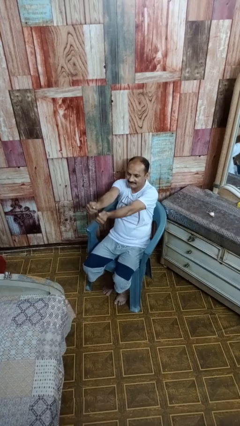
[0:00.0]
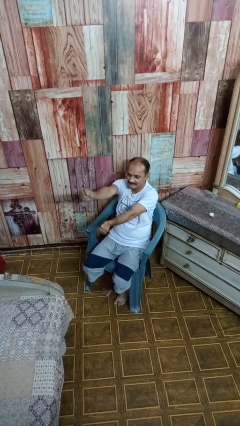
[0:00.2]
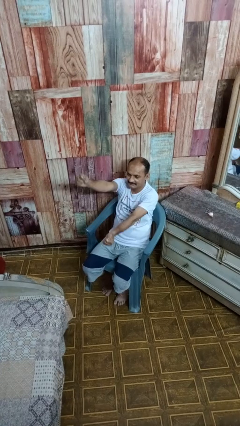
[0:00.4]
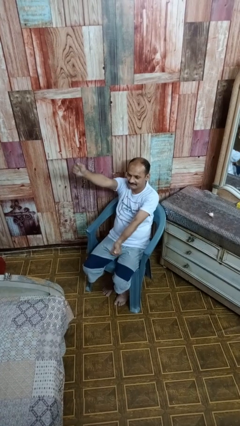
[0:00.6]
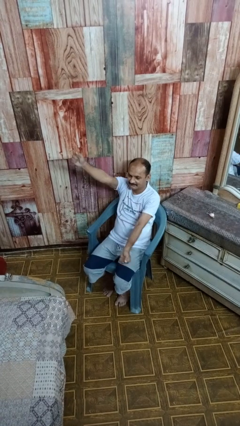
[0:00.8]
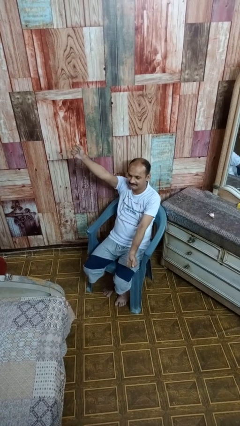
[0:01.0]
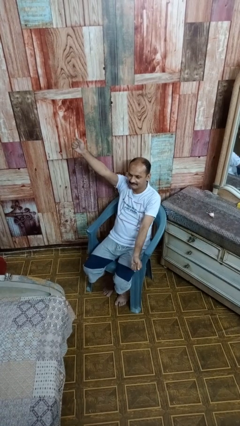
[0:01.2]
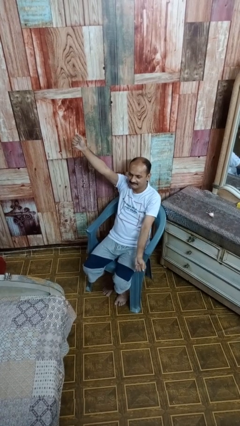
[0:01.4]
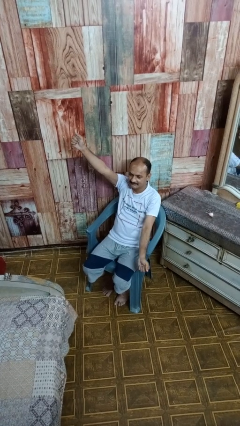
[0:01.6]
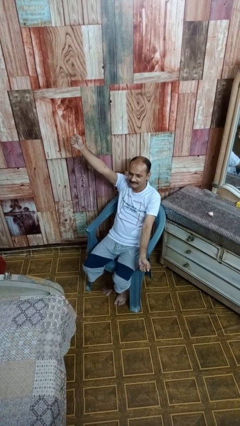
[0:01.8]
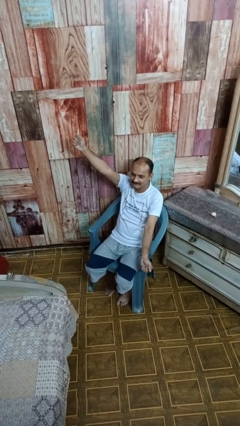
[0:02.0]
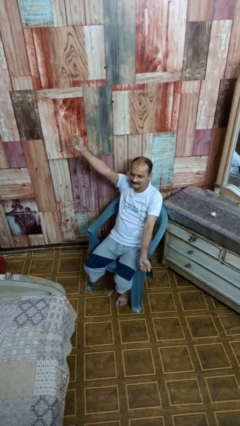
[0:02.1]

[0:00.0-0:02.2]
person gestures zoom out

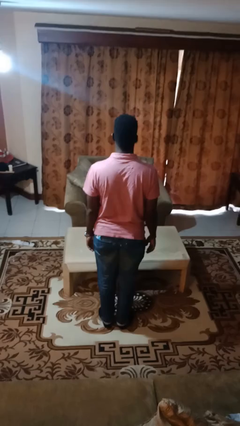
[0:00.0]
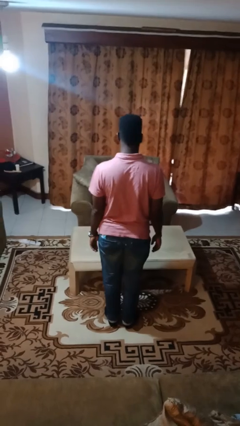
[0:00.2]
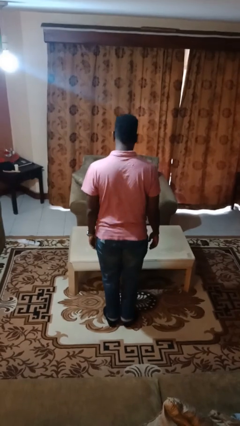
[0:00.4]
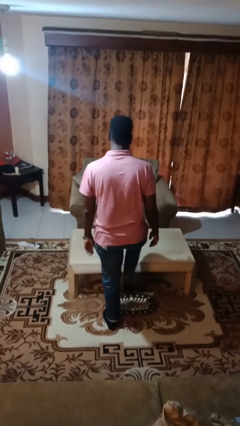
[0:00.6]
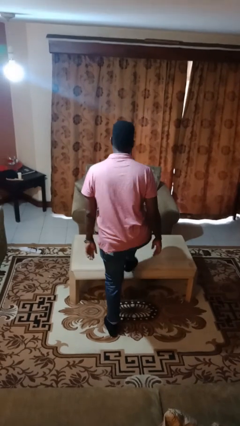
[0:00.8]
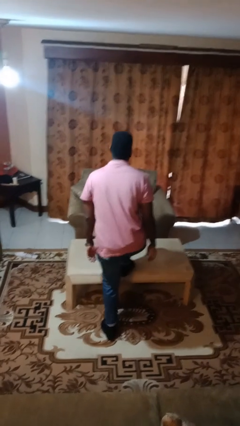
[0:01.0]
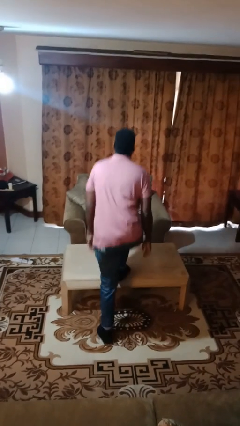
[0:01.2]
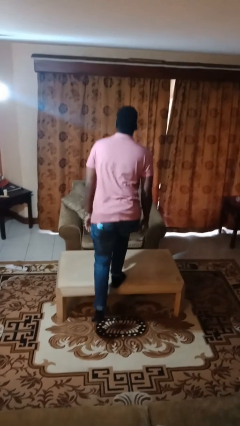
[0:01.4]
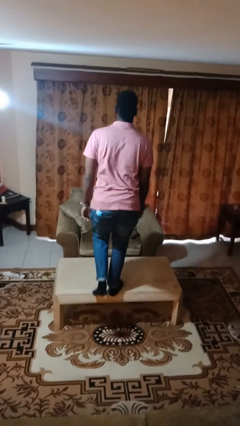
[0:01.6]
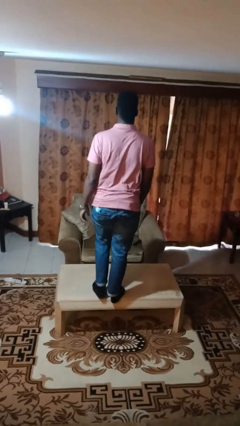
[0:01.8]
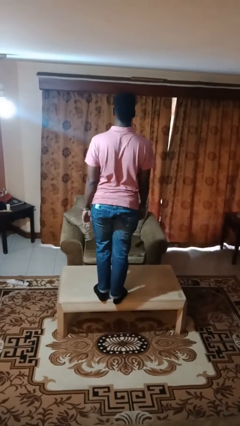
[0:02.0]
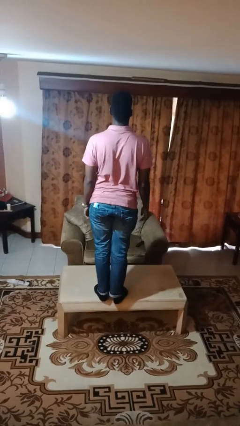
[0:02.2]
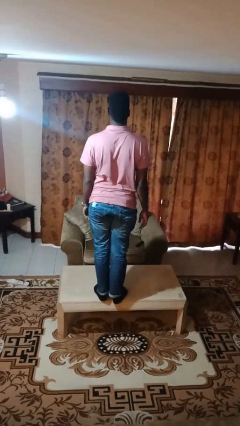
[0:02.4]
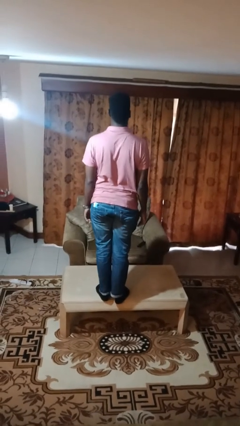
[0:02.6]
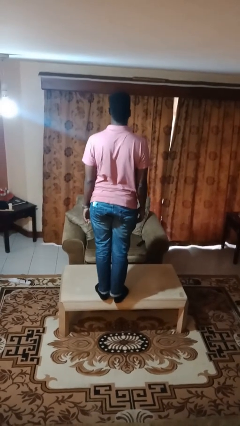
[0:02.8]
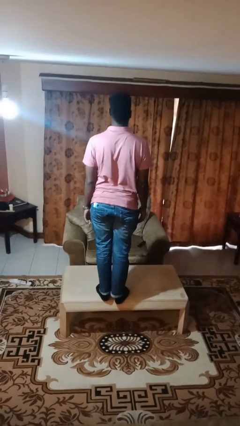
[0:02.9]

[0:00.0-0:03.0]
person climbs on table

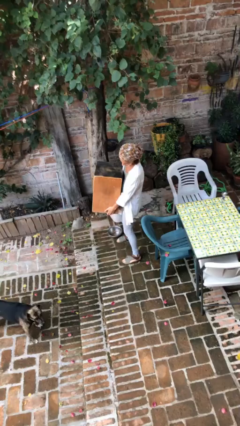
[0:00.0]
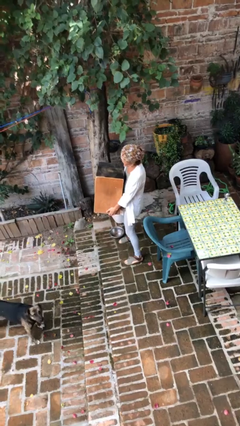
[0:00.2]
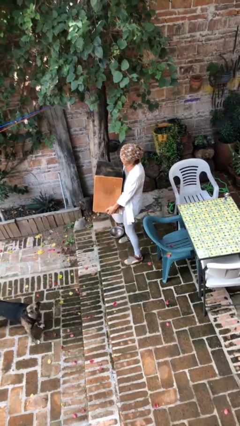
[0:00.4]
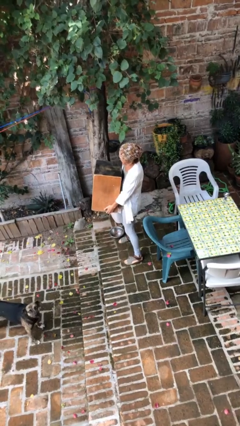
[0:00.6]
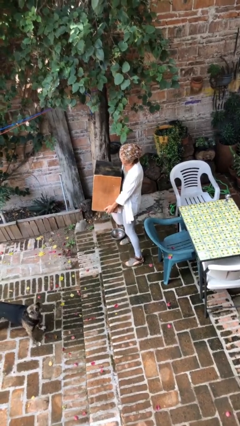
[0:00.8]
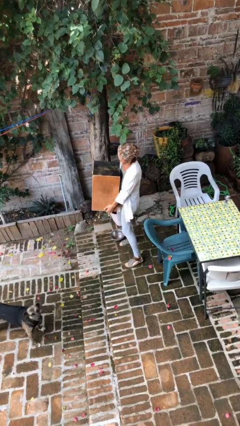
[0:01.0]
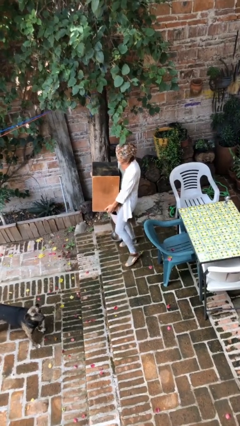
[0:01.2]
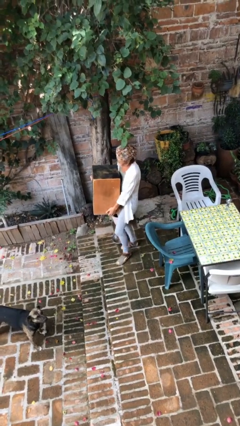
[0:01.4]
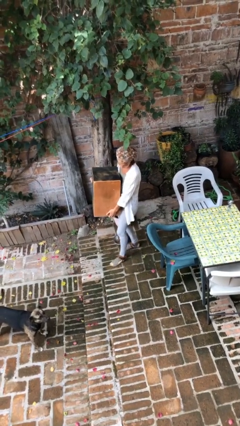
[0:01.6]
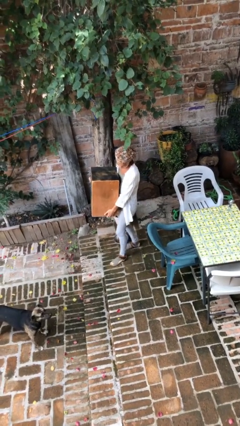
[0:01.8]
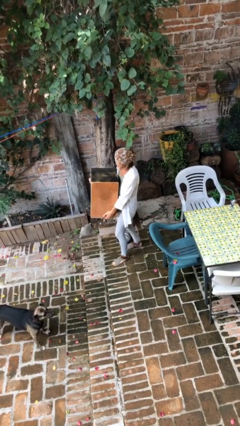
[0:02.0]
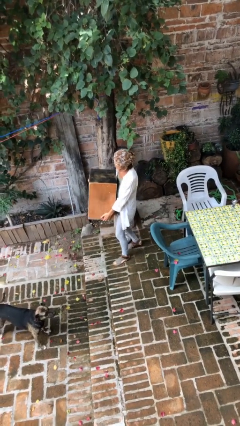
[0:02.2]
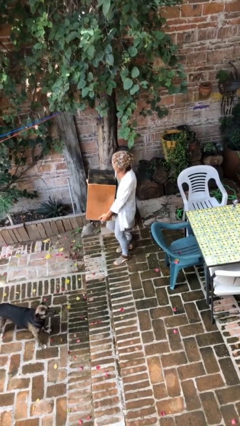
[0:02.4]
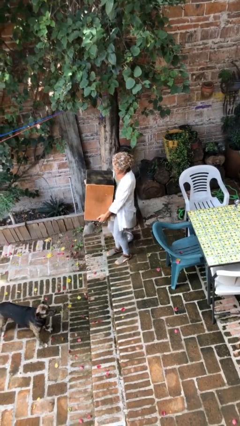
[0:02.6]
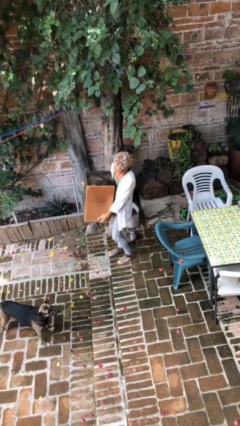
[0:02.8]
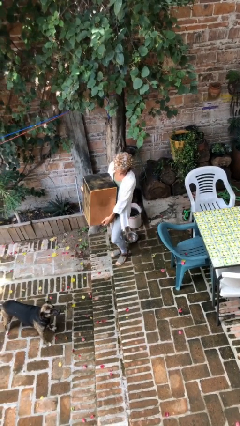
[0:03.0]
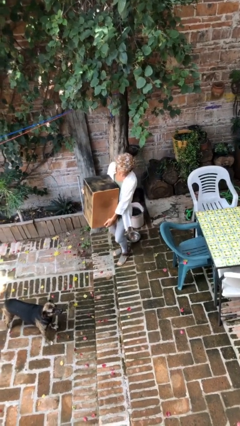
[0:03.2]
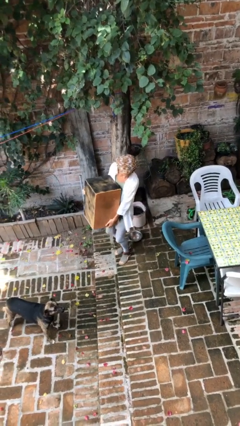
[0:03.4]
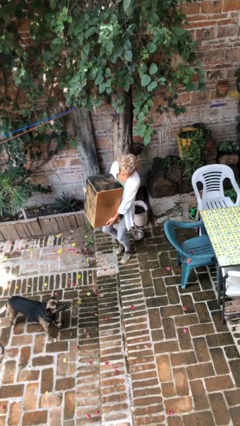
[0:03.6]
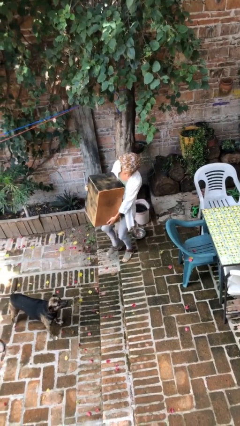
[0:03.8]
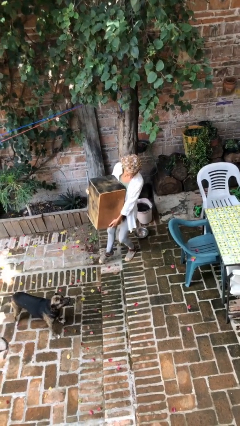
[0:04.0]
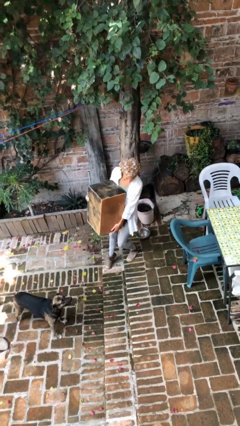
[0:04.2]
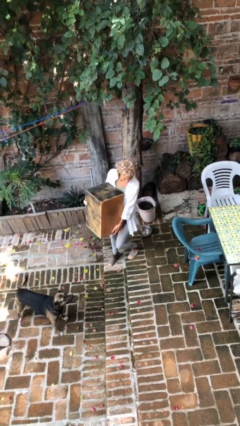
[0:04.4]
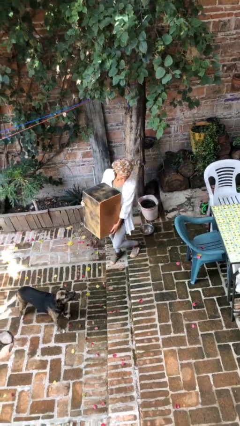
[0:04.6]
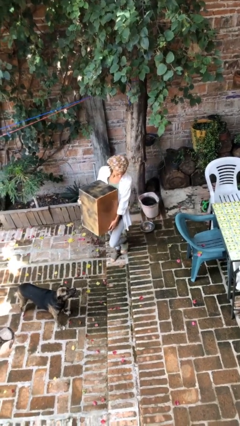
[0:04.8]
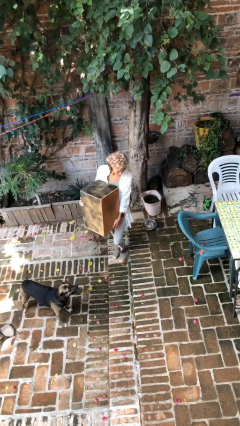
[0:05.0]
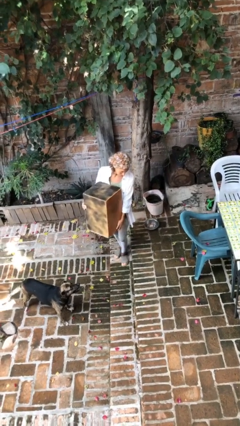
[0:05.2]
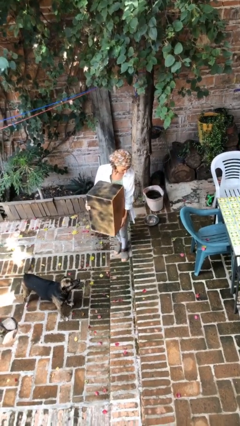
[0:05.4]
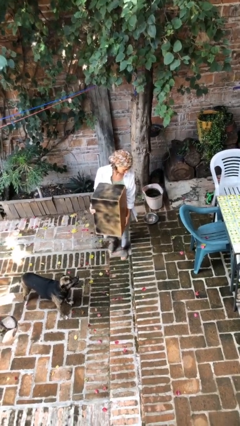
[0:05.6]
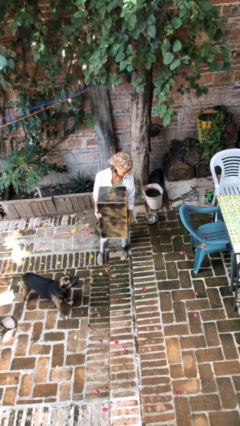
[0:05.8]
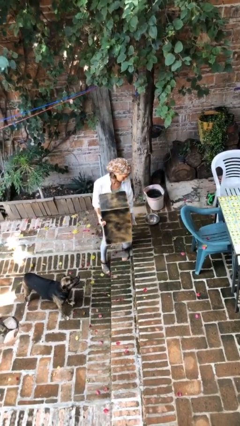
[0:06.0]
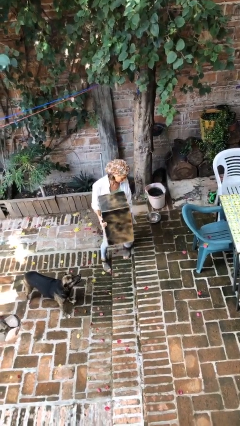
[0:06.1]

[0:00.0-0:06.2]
person carries heavy object

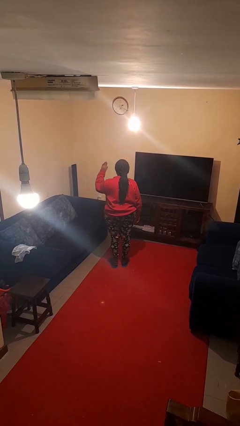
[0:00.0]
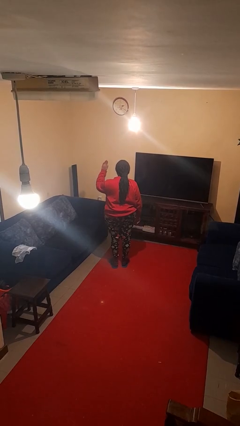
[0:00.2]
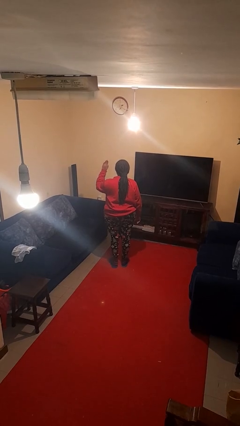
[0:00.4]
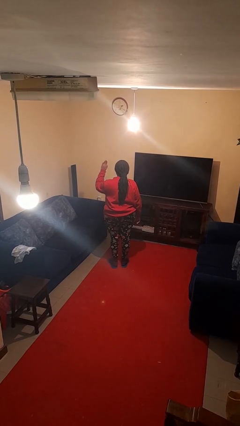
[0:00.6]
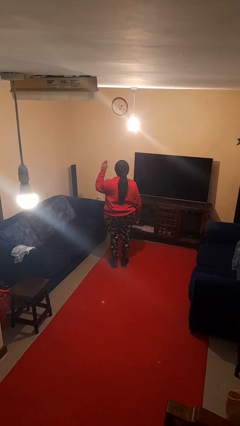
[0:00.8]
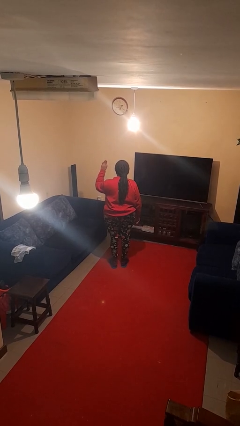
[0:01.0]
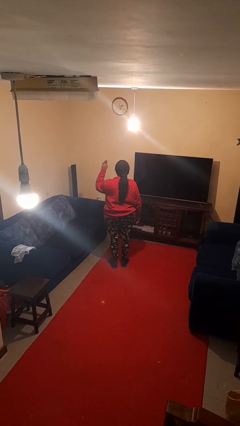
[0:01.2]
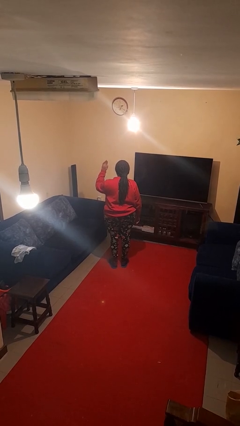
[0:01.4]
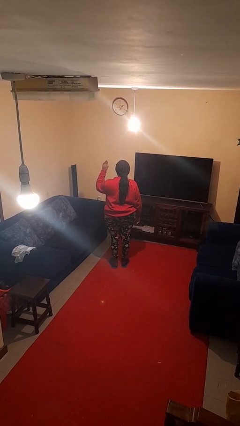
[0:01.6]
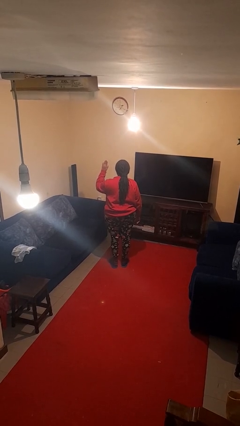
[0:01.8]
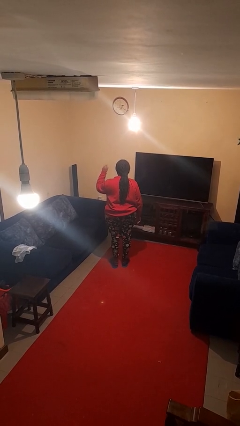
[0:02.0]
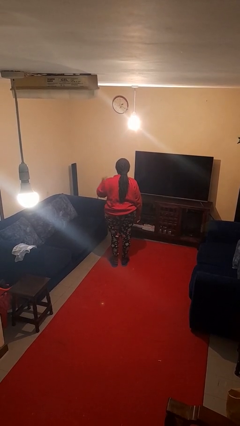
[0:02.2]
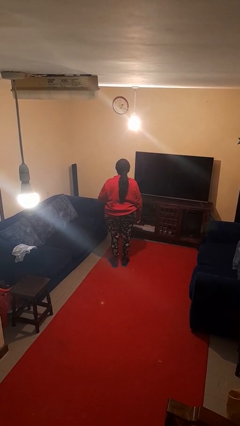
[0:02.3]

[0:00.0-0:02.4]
person gestures stop

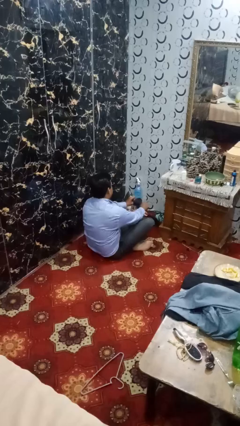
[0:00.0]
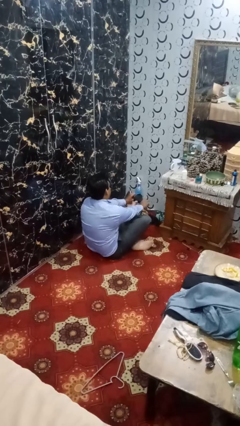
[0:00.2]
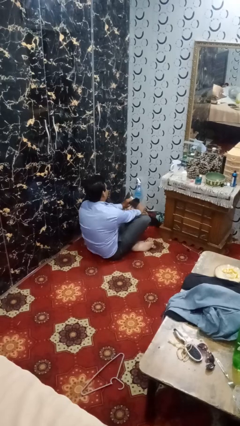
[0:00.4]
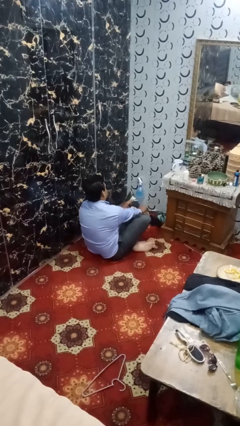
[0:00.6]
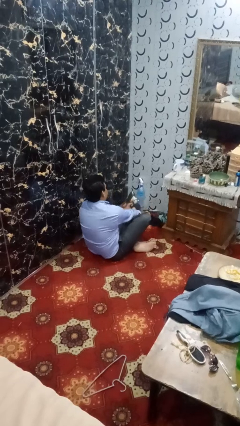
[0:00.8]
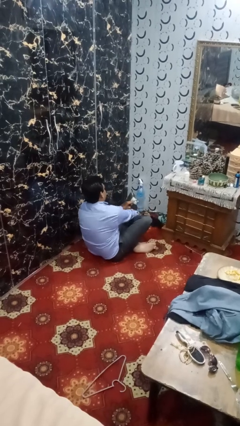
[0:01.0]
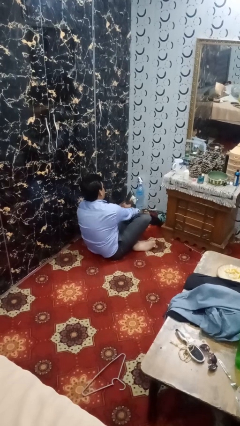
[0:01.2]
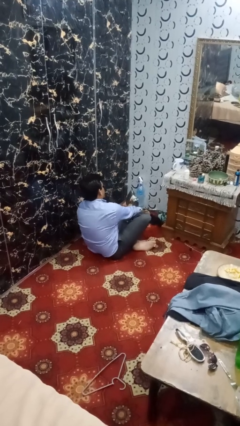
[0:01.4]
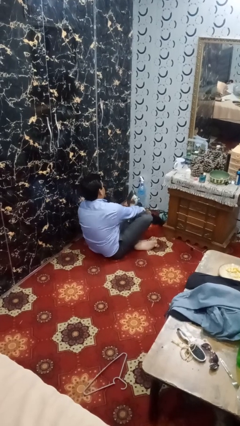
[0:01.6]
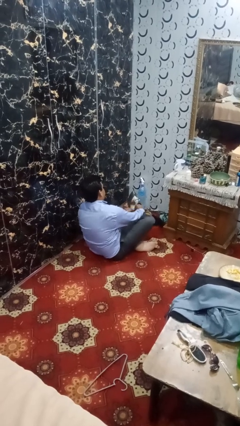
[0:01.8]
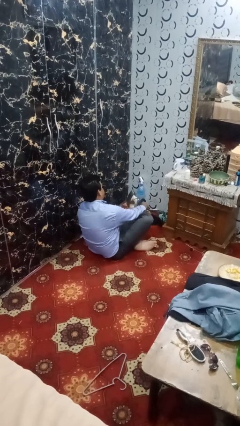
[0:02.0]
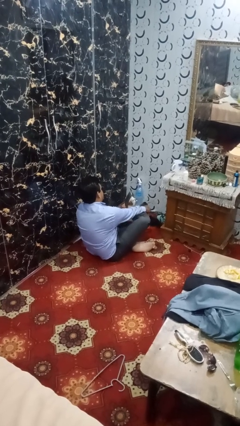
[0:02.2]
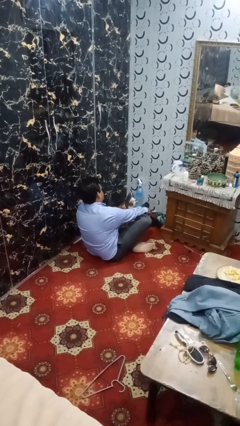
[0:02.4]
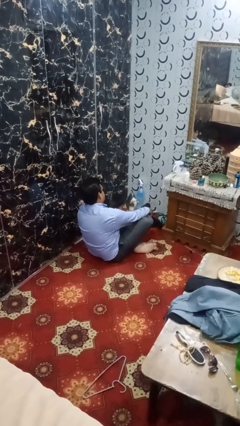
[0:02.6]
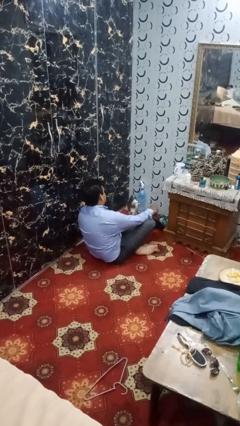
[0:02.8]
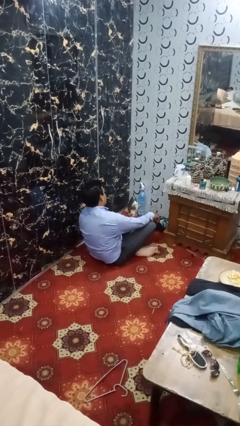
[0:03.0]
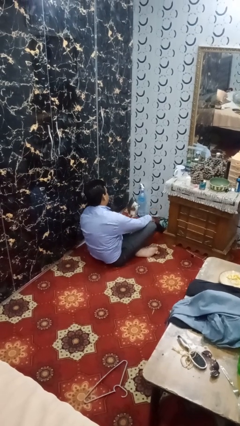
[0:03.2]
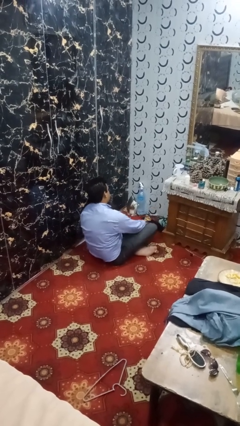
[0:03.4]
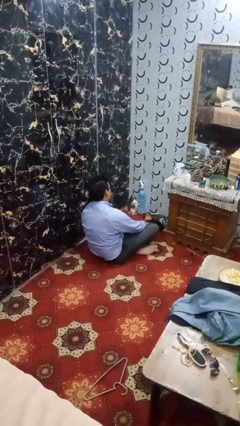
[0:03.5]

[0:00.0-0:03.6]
person puts on socks
